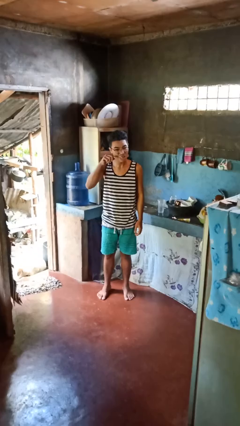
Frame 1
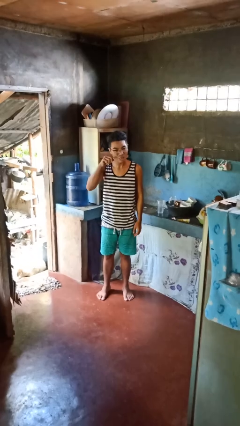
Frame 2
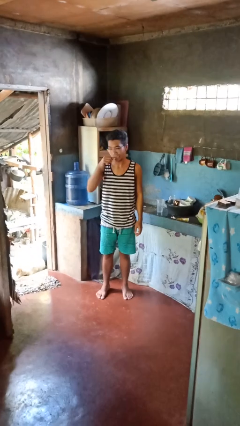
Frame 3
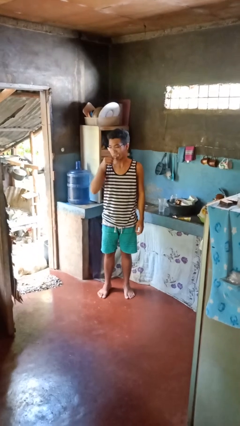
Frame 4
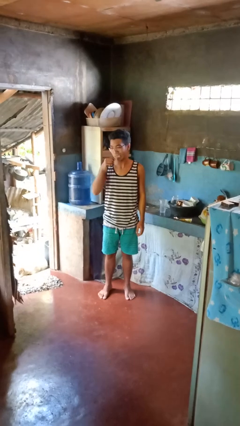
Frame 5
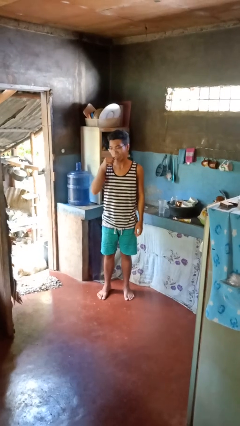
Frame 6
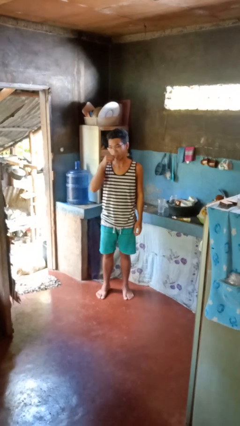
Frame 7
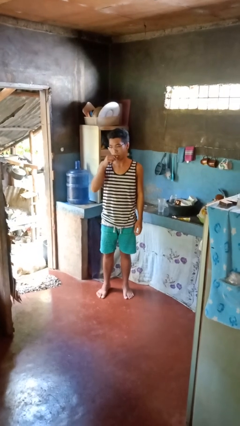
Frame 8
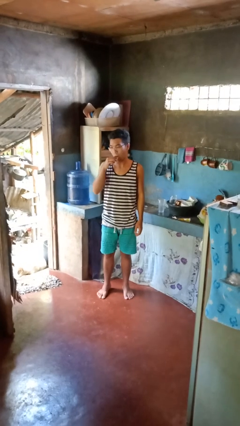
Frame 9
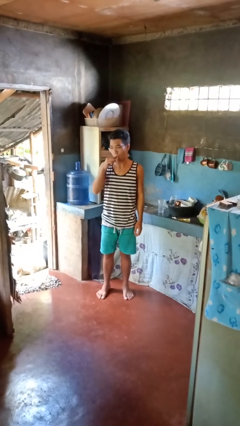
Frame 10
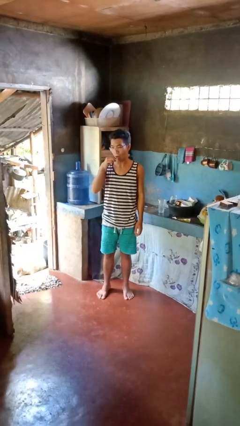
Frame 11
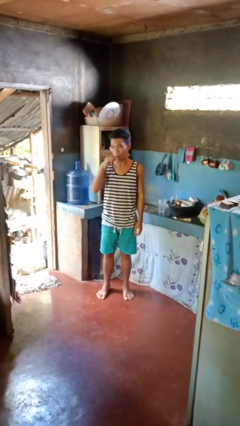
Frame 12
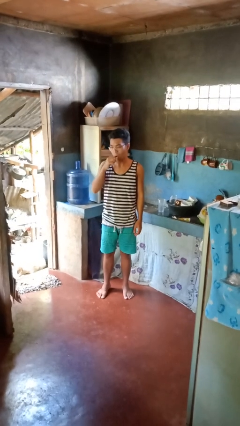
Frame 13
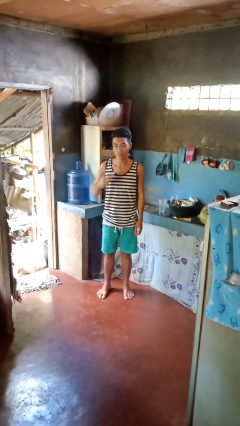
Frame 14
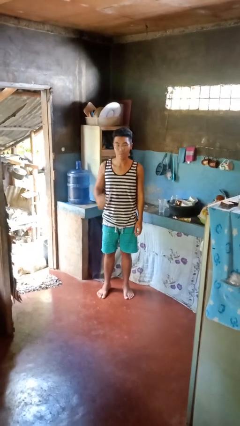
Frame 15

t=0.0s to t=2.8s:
person brushes teeth

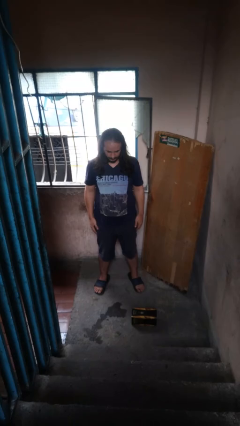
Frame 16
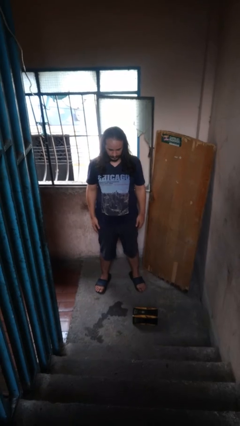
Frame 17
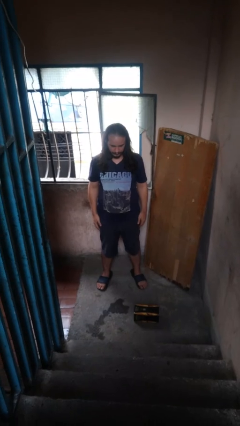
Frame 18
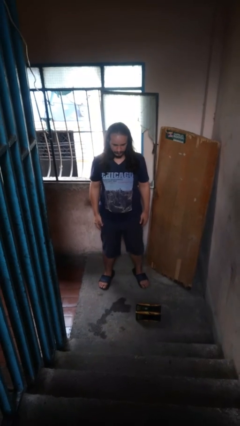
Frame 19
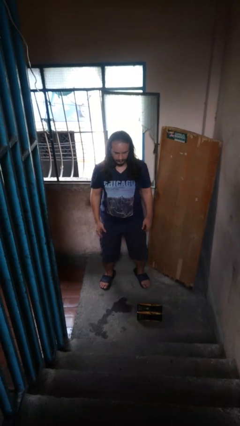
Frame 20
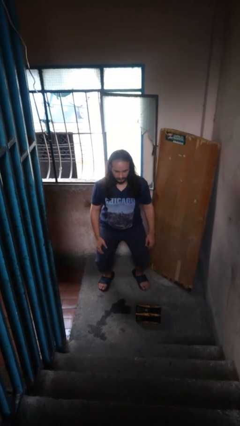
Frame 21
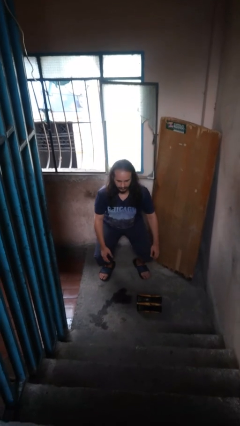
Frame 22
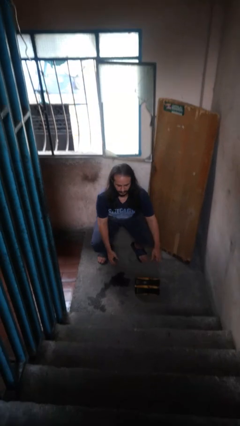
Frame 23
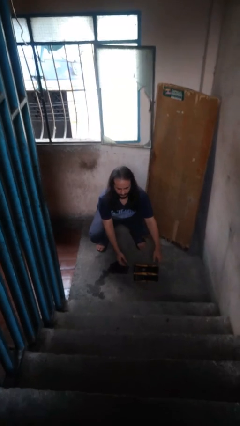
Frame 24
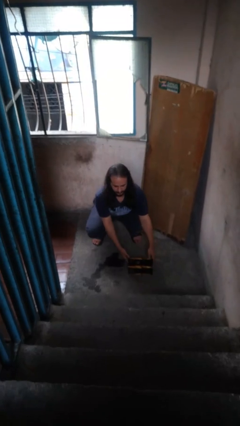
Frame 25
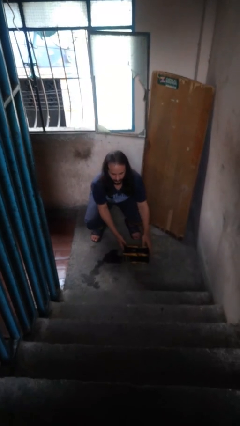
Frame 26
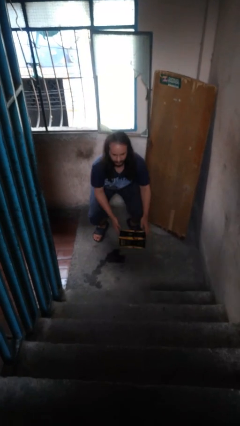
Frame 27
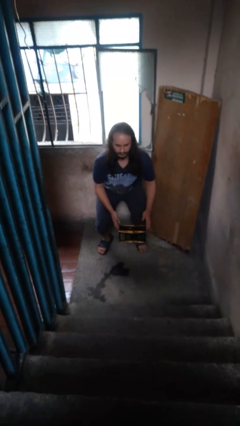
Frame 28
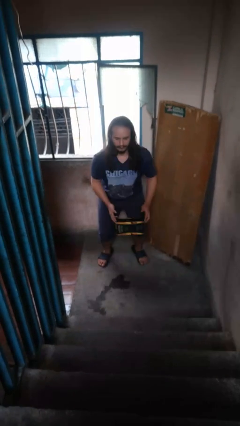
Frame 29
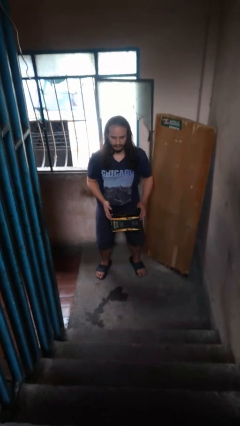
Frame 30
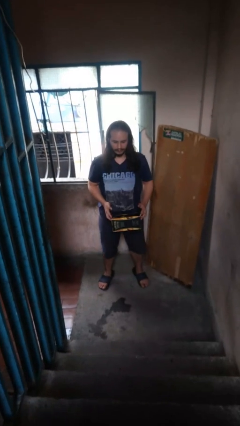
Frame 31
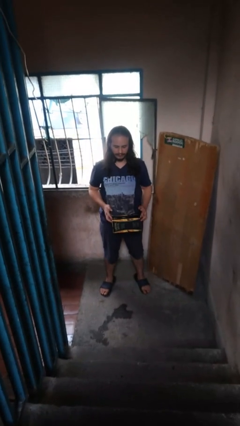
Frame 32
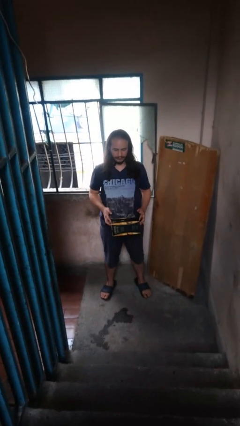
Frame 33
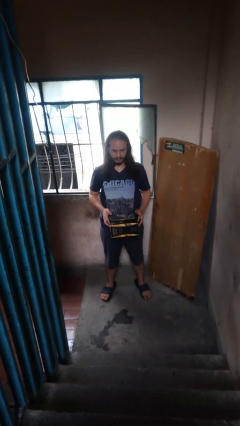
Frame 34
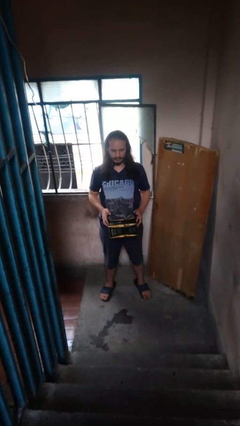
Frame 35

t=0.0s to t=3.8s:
person picks up object from floor

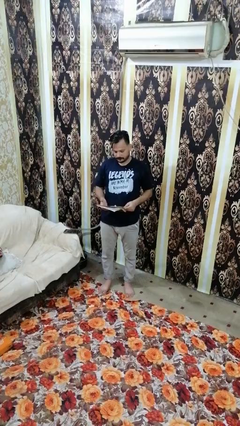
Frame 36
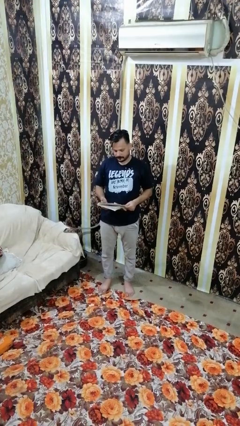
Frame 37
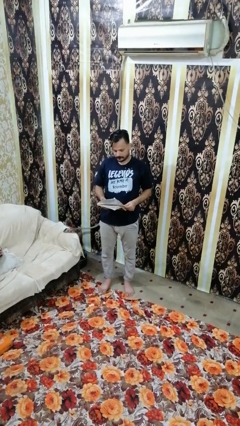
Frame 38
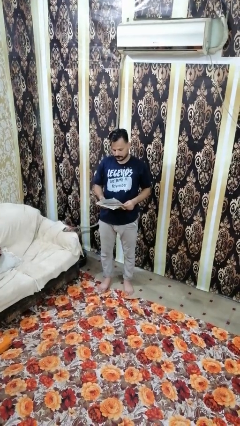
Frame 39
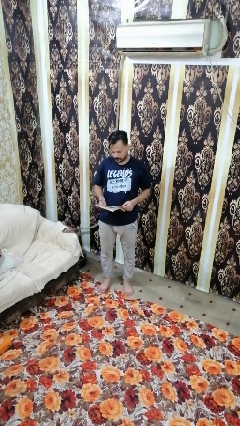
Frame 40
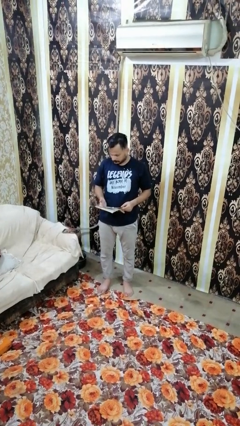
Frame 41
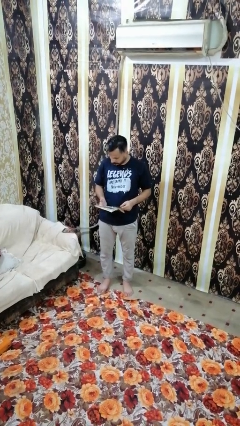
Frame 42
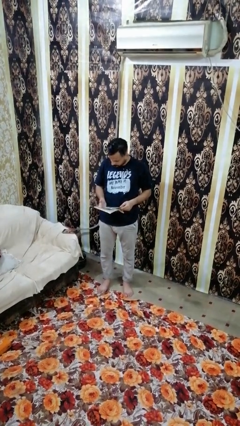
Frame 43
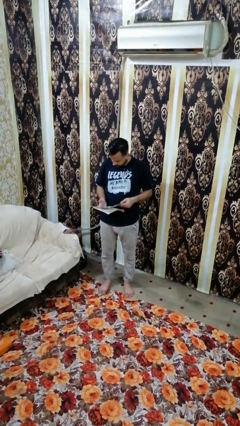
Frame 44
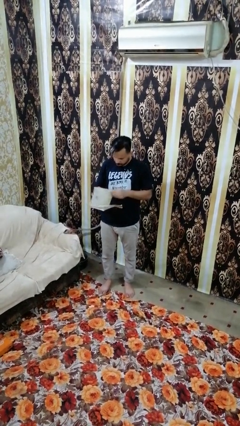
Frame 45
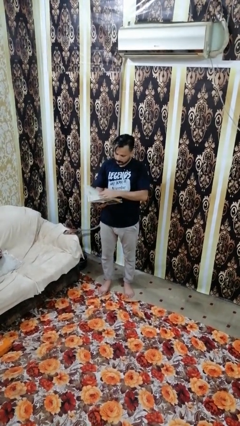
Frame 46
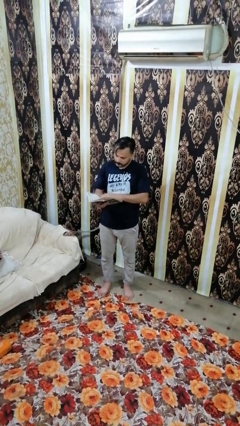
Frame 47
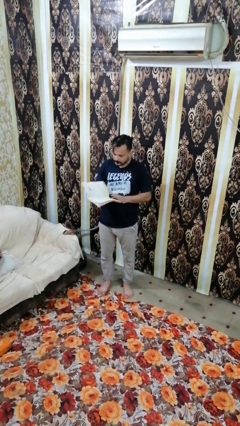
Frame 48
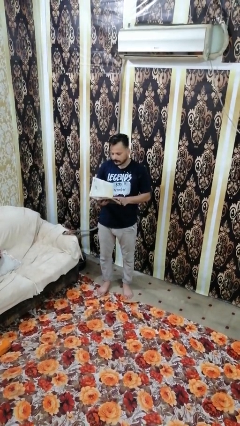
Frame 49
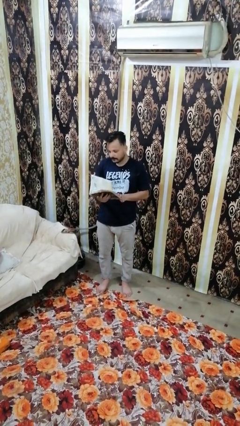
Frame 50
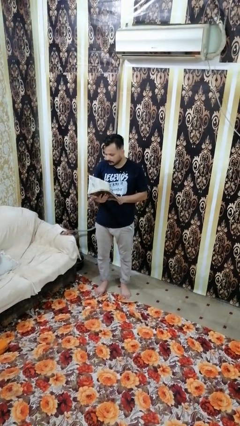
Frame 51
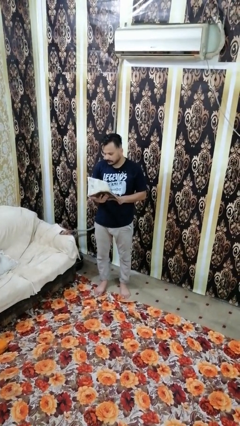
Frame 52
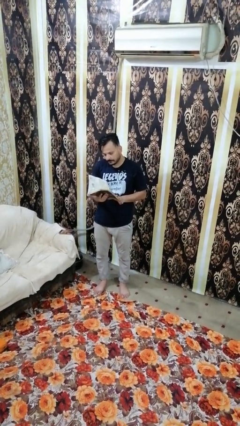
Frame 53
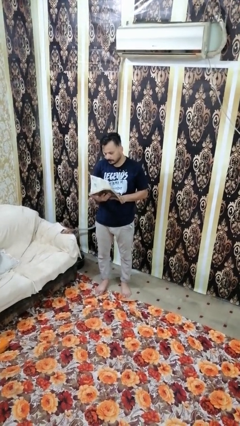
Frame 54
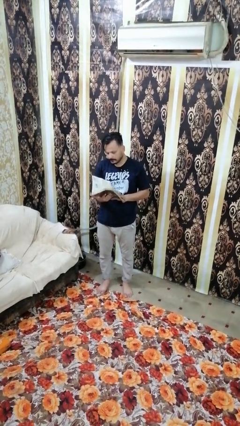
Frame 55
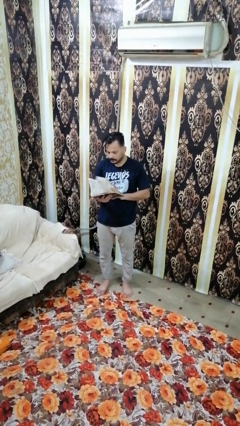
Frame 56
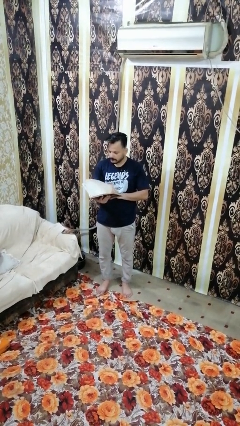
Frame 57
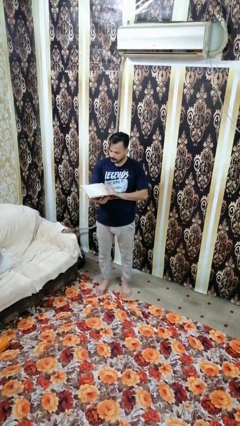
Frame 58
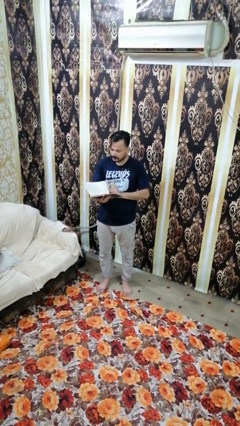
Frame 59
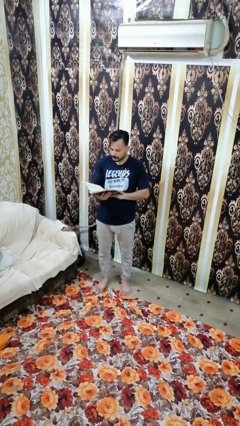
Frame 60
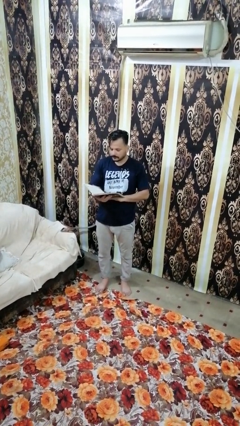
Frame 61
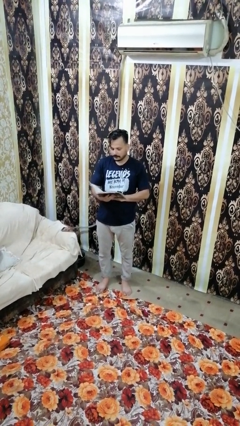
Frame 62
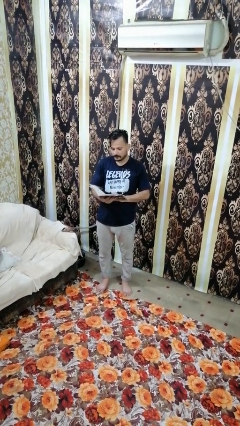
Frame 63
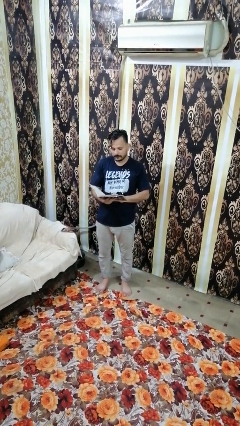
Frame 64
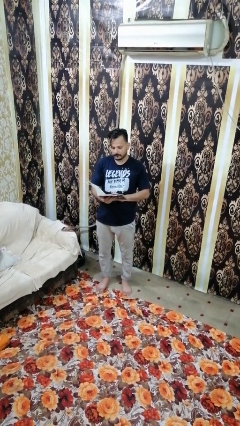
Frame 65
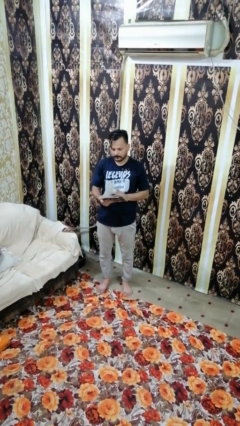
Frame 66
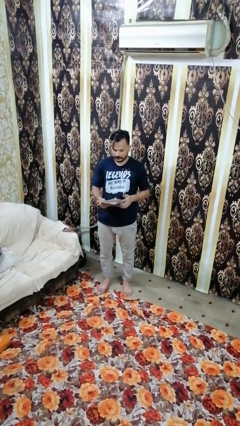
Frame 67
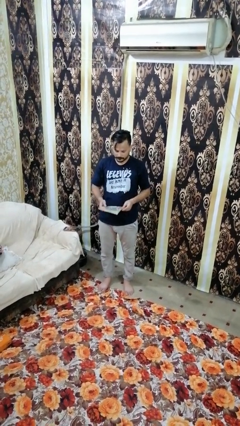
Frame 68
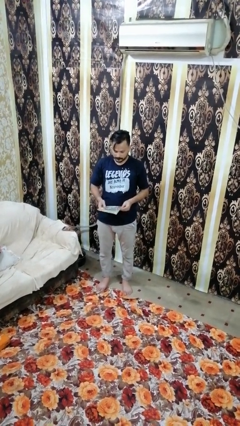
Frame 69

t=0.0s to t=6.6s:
person reads book

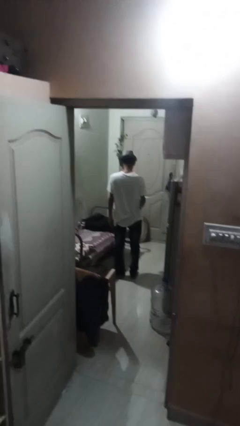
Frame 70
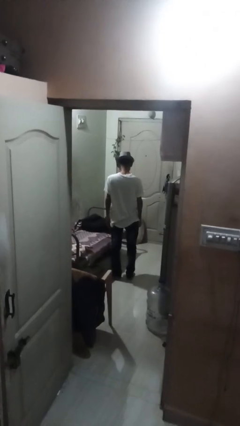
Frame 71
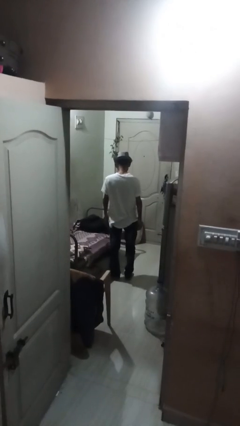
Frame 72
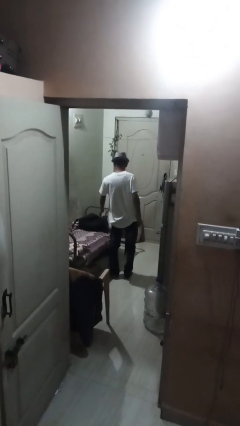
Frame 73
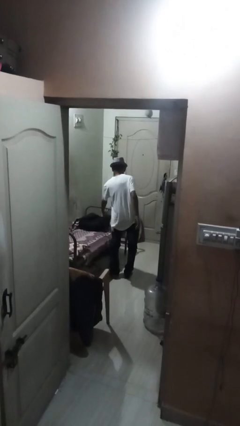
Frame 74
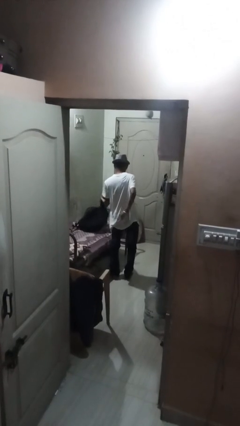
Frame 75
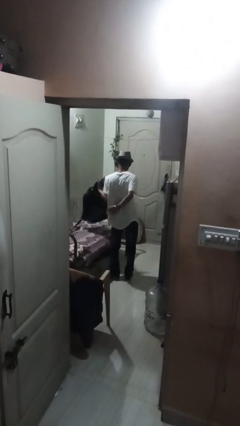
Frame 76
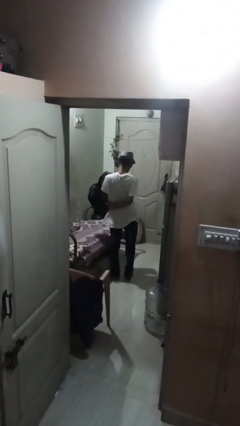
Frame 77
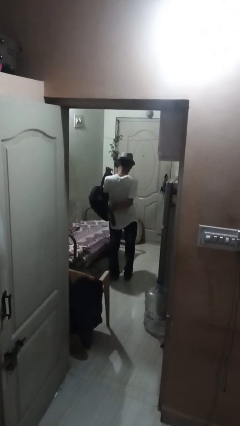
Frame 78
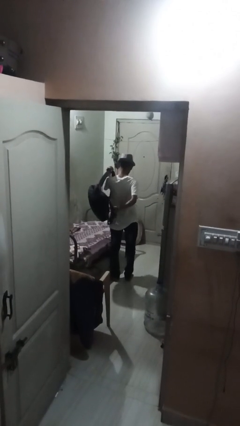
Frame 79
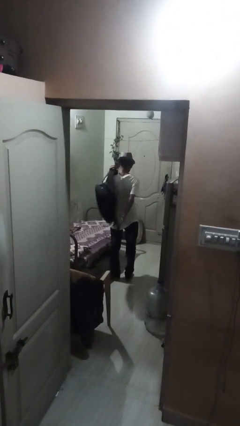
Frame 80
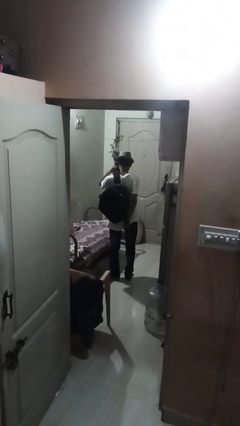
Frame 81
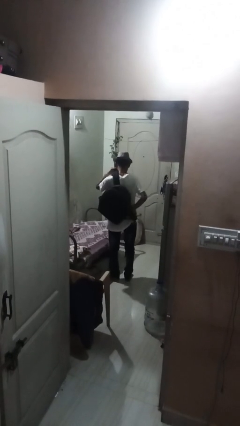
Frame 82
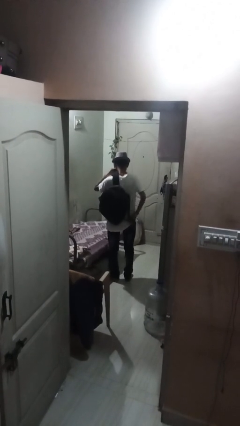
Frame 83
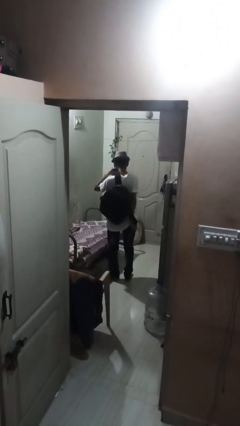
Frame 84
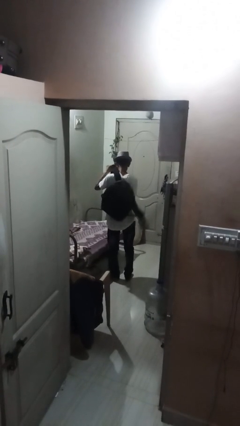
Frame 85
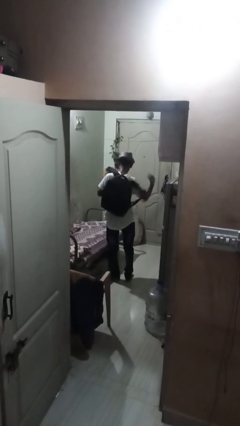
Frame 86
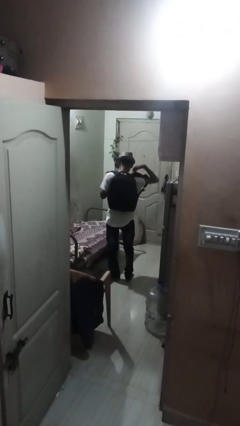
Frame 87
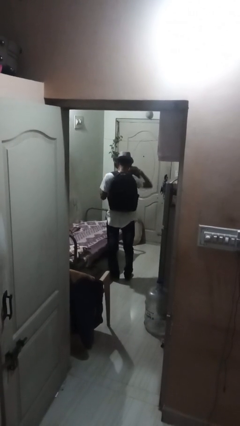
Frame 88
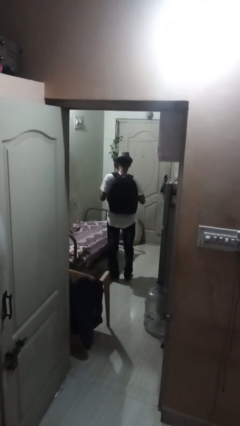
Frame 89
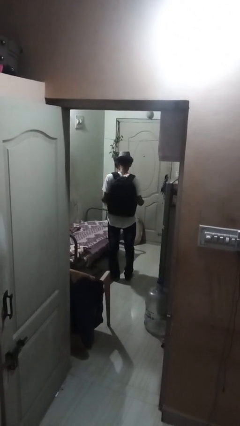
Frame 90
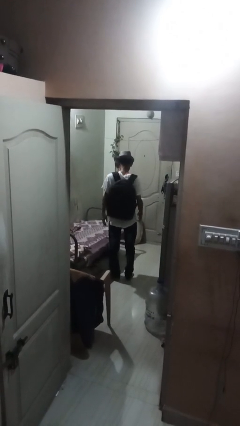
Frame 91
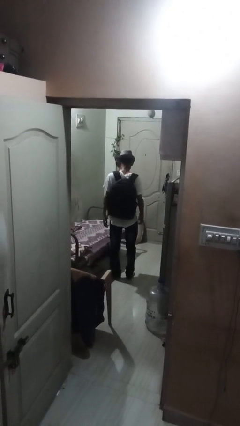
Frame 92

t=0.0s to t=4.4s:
person puts on backpack
